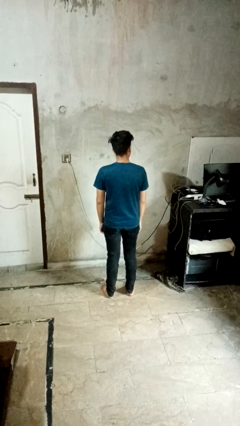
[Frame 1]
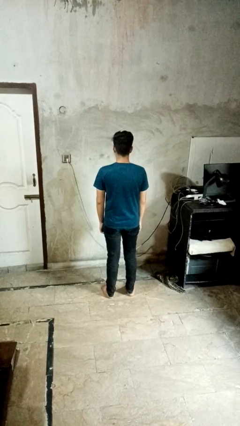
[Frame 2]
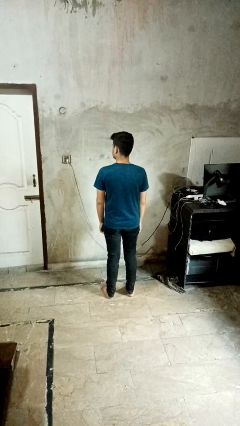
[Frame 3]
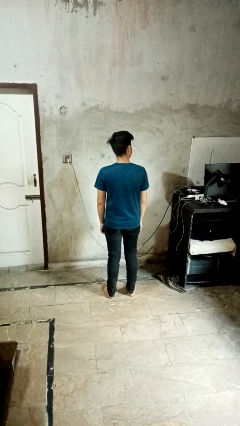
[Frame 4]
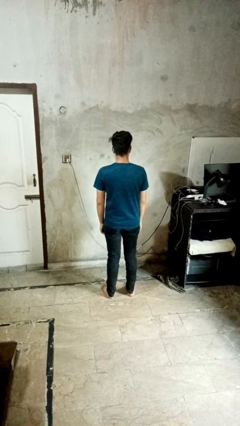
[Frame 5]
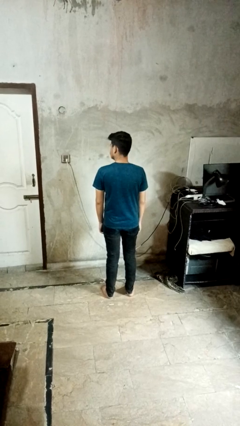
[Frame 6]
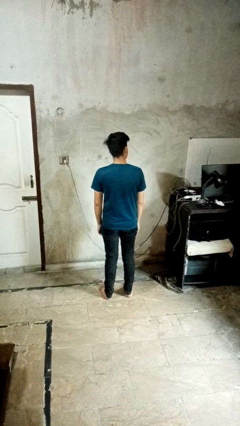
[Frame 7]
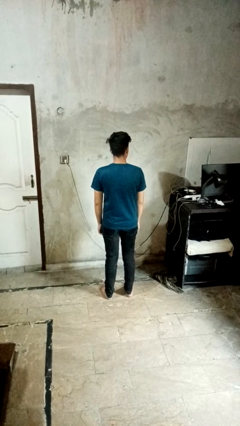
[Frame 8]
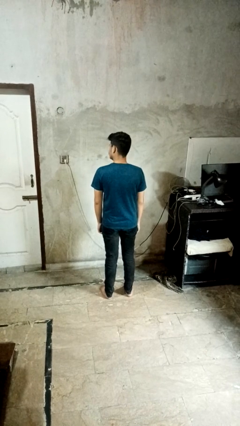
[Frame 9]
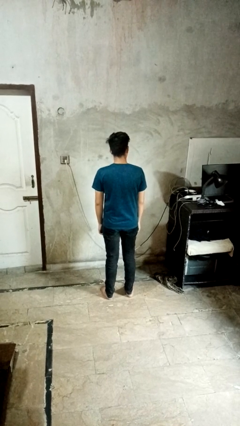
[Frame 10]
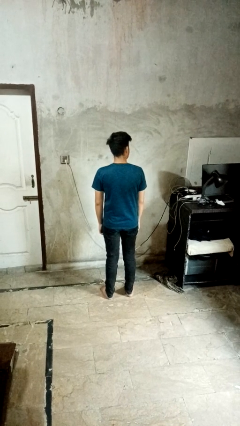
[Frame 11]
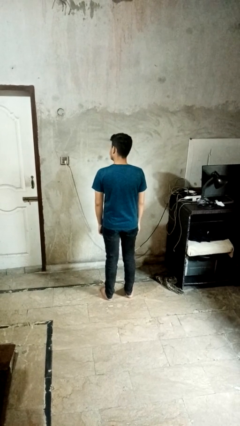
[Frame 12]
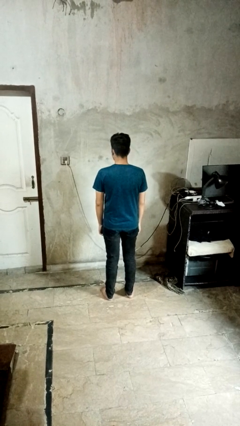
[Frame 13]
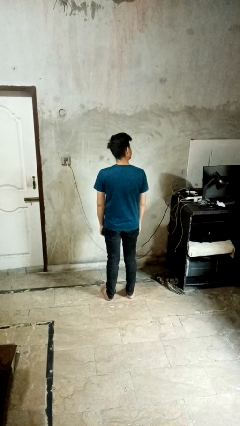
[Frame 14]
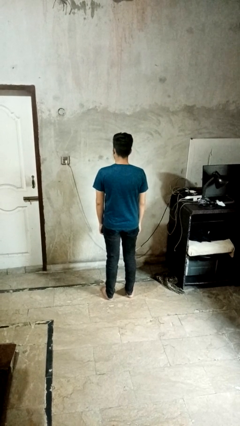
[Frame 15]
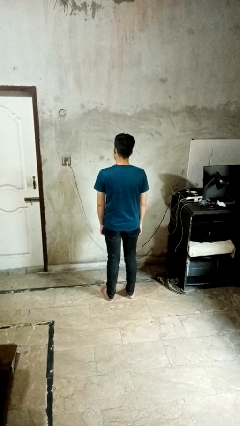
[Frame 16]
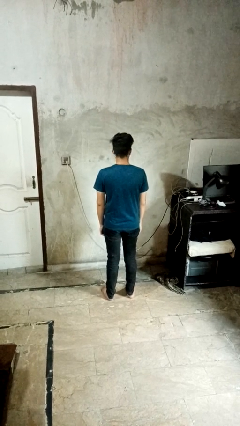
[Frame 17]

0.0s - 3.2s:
person shakes head

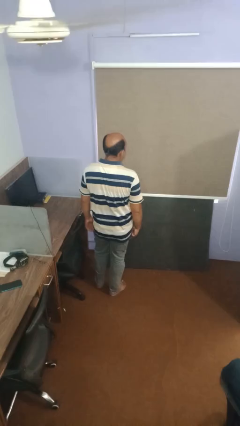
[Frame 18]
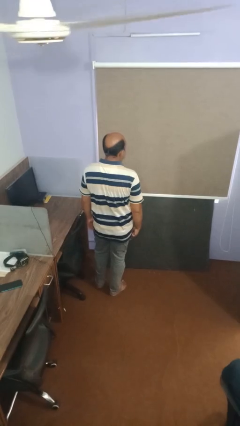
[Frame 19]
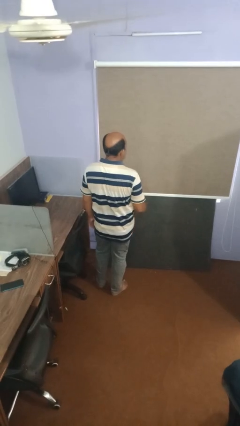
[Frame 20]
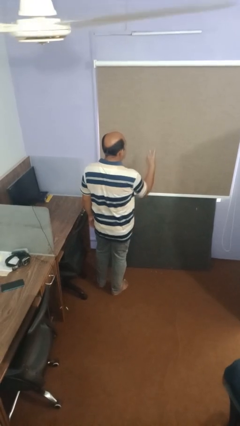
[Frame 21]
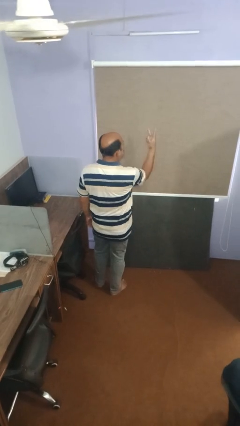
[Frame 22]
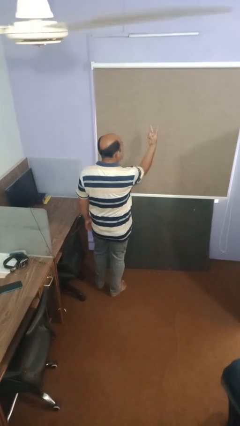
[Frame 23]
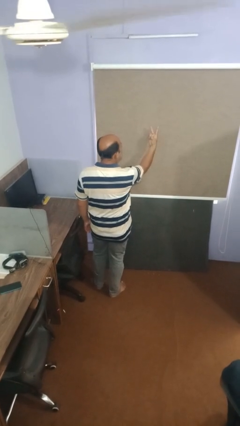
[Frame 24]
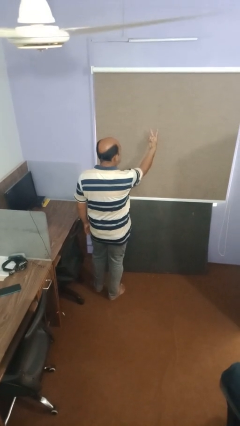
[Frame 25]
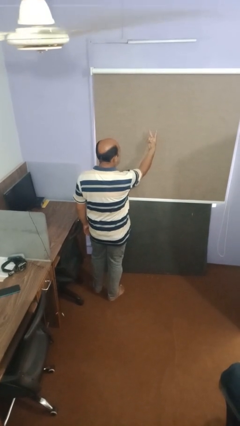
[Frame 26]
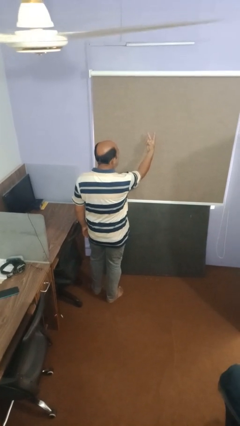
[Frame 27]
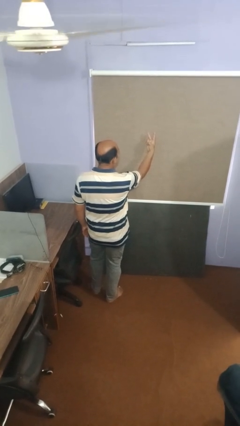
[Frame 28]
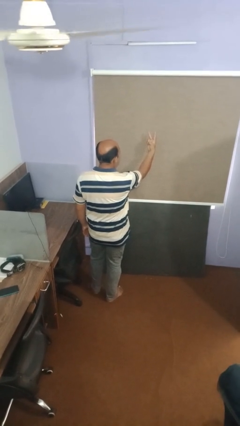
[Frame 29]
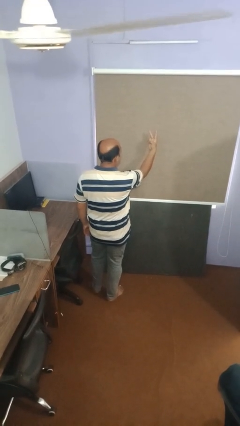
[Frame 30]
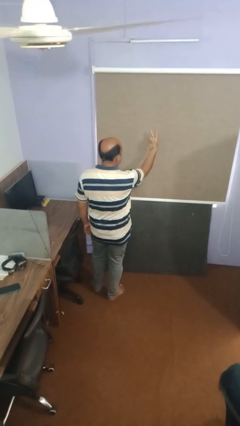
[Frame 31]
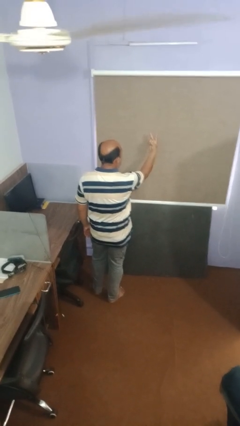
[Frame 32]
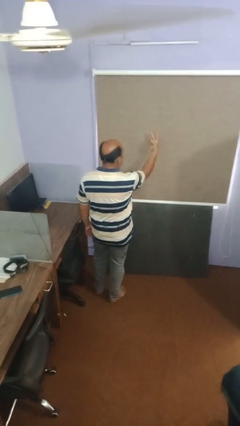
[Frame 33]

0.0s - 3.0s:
person gestures peace

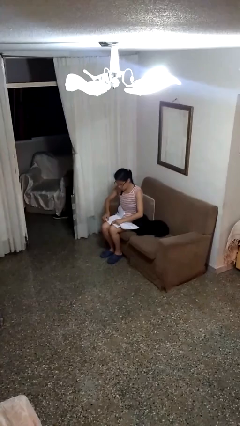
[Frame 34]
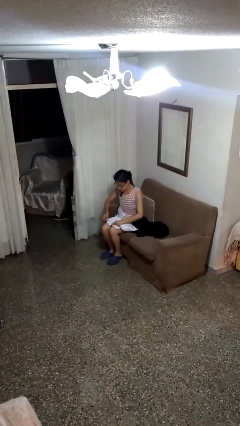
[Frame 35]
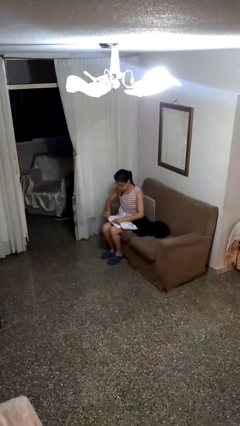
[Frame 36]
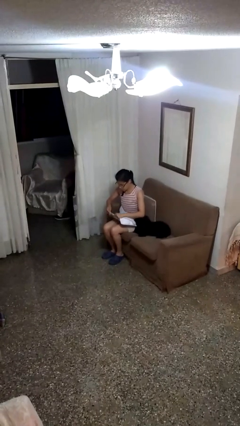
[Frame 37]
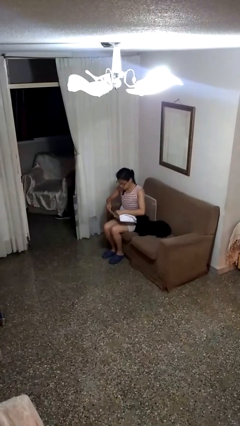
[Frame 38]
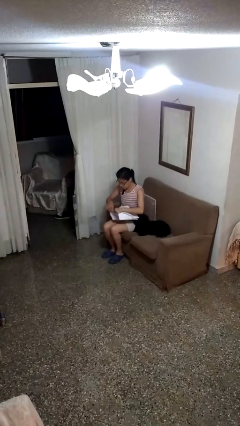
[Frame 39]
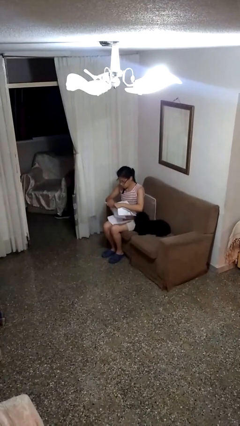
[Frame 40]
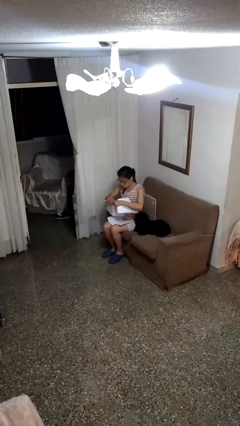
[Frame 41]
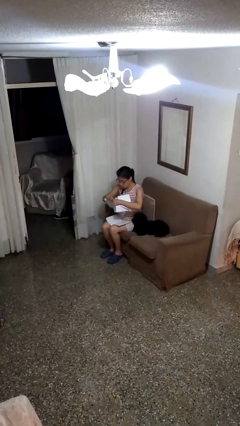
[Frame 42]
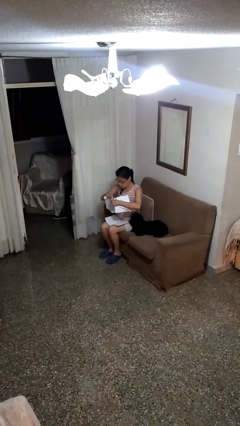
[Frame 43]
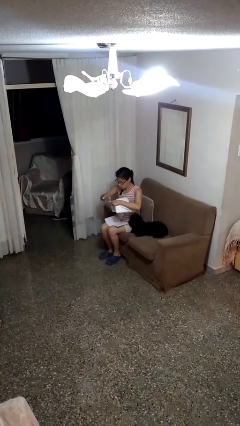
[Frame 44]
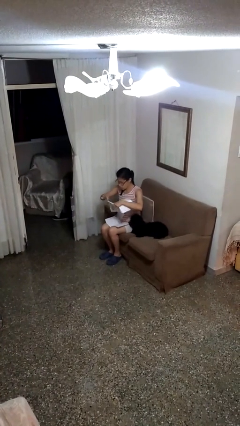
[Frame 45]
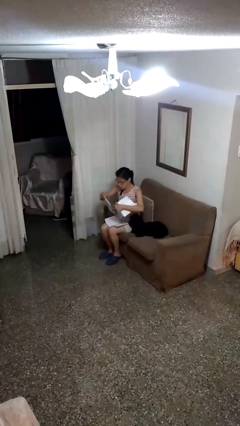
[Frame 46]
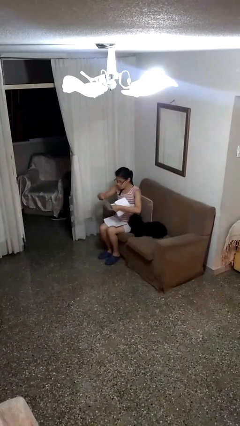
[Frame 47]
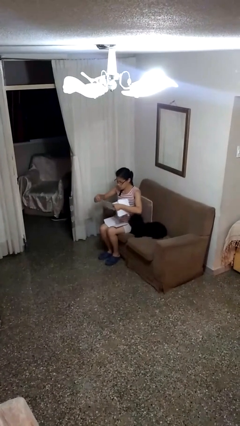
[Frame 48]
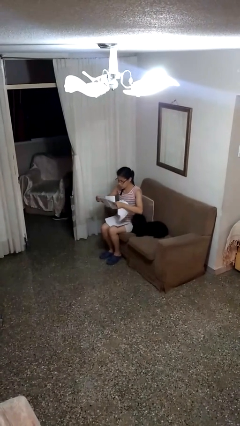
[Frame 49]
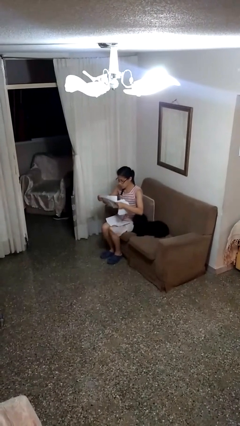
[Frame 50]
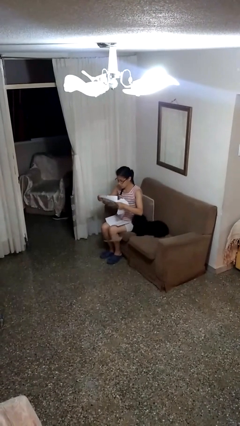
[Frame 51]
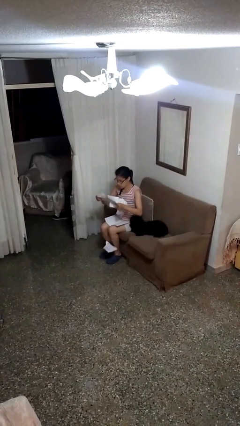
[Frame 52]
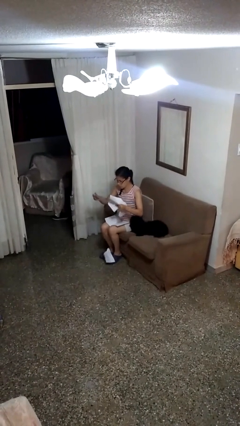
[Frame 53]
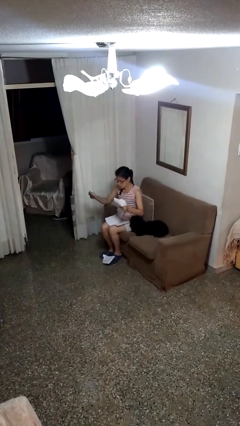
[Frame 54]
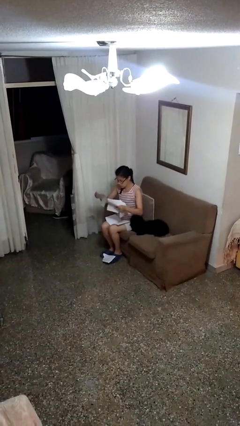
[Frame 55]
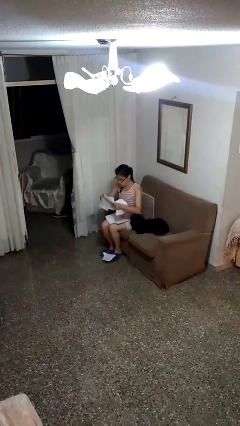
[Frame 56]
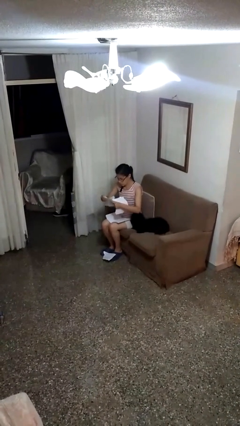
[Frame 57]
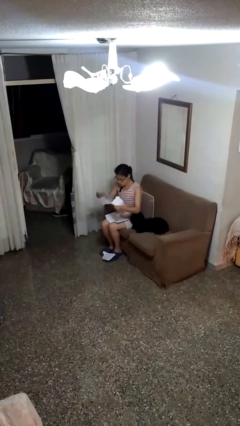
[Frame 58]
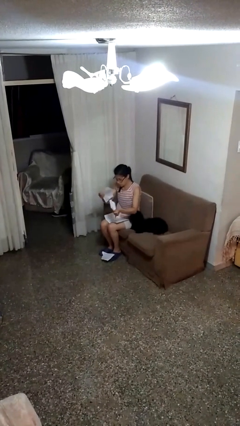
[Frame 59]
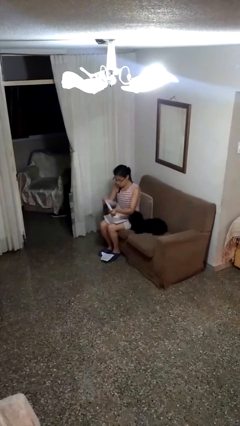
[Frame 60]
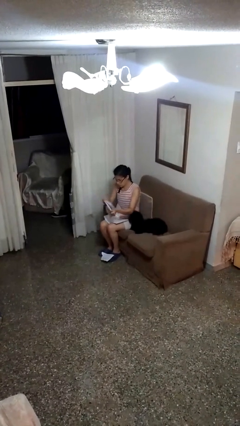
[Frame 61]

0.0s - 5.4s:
person tears paper

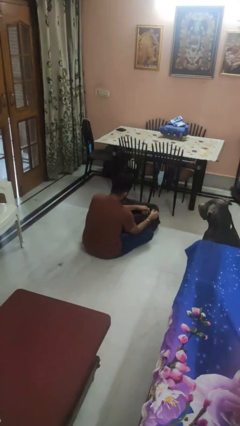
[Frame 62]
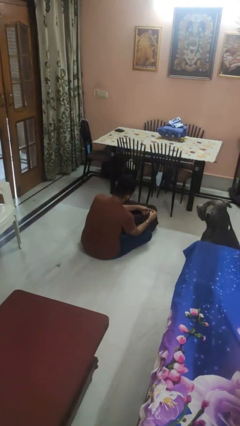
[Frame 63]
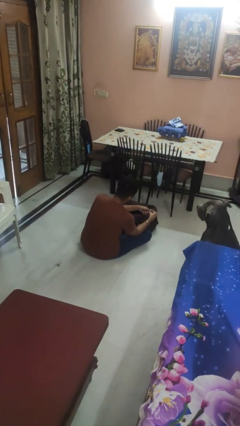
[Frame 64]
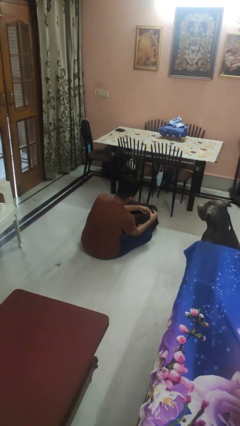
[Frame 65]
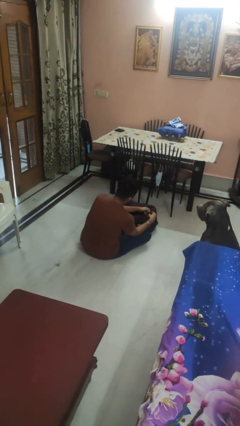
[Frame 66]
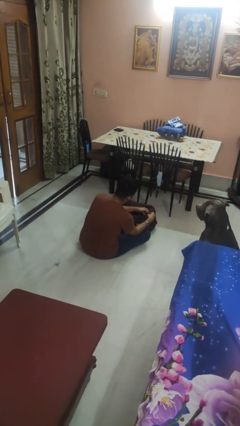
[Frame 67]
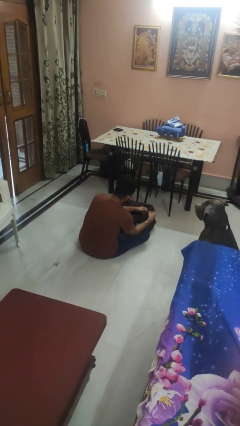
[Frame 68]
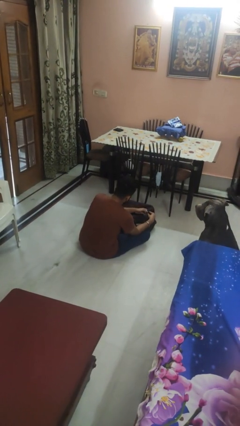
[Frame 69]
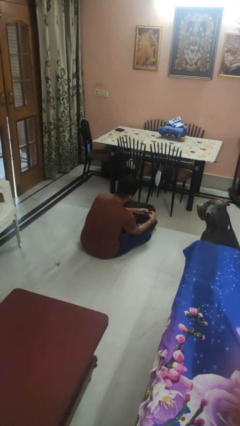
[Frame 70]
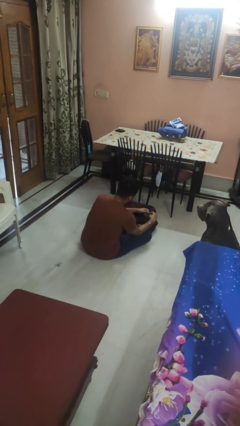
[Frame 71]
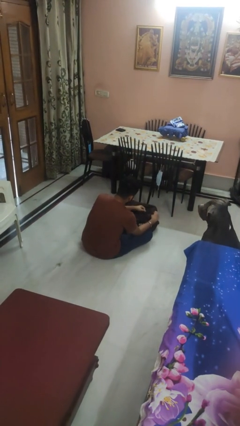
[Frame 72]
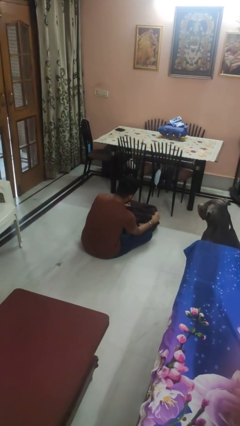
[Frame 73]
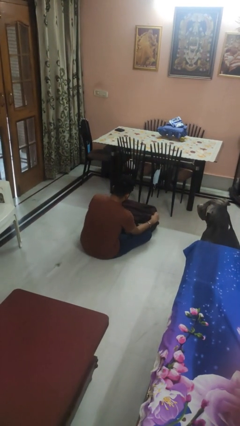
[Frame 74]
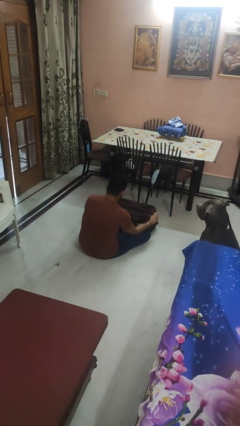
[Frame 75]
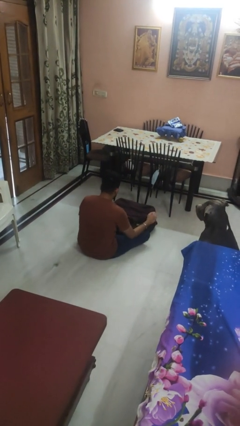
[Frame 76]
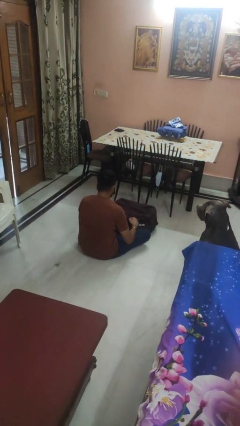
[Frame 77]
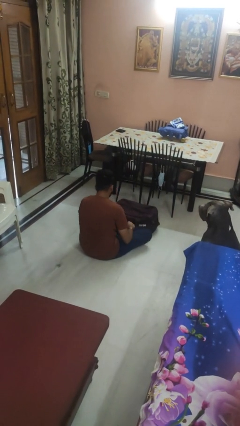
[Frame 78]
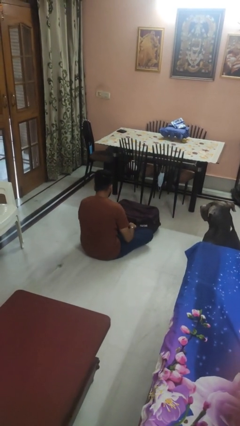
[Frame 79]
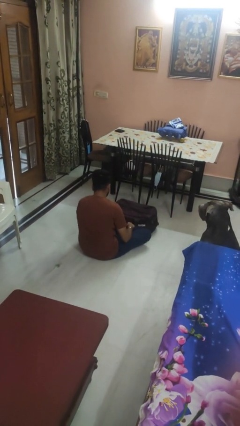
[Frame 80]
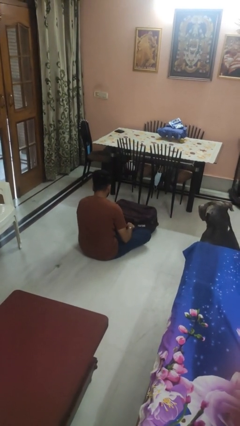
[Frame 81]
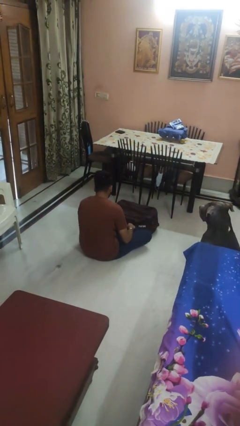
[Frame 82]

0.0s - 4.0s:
person closes suitcase

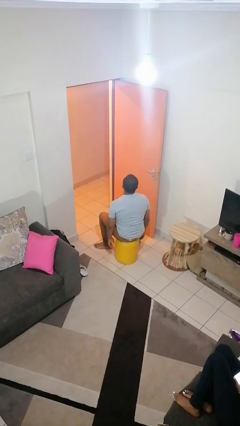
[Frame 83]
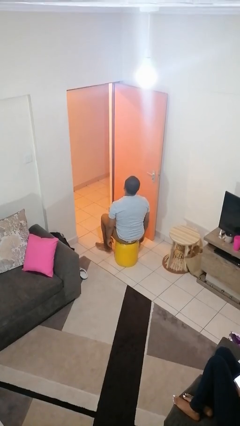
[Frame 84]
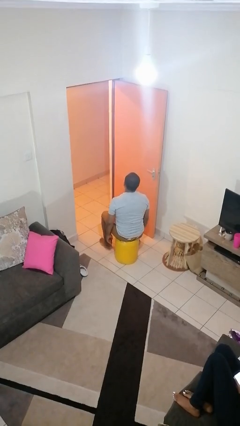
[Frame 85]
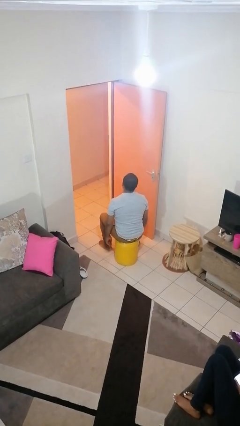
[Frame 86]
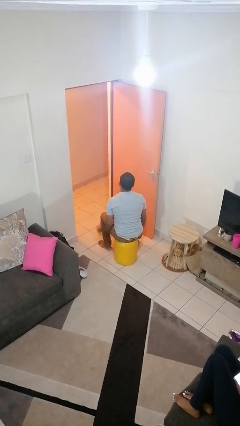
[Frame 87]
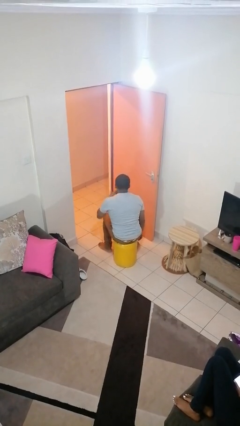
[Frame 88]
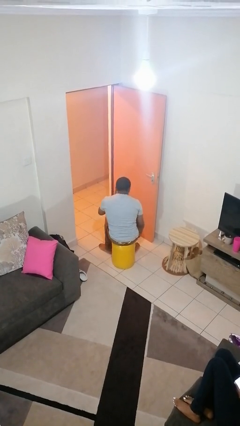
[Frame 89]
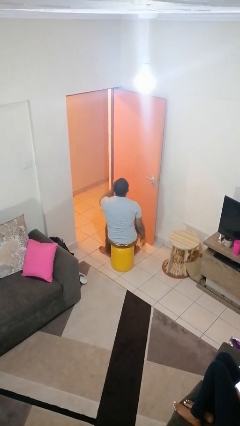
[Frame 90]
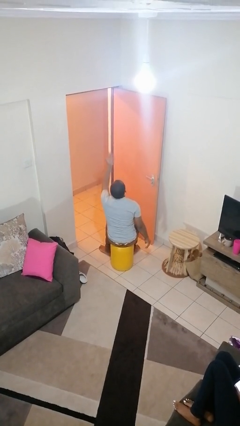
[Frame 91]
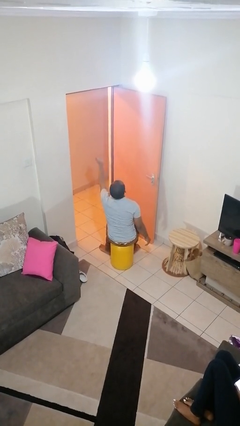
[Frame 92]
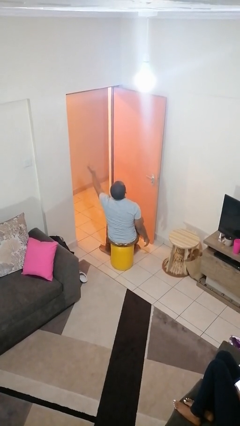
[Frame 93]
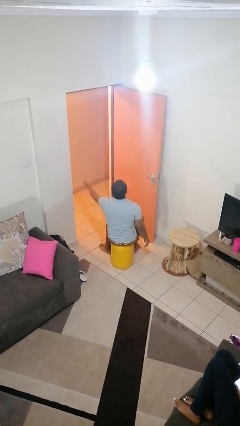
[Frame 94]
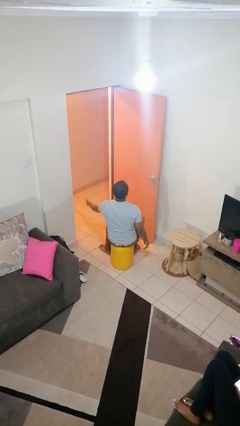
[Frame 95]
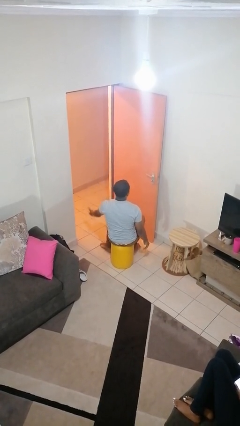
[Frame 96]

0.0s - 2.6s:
person gestures blow kiss
